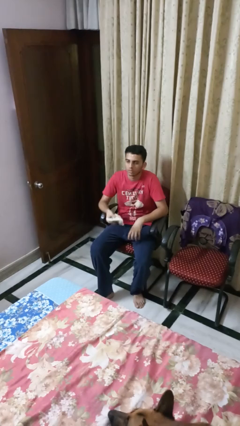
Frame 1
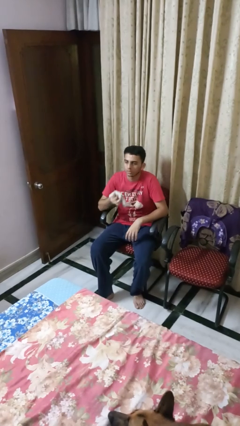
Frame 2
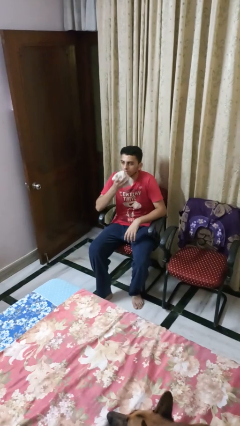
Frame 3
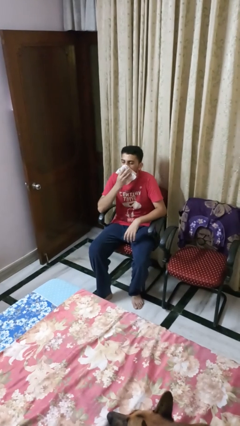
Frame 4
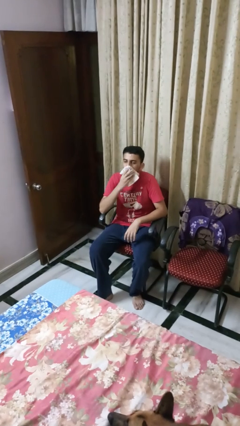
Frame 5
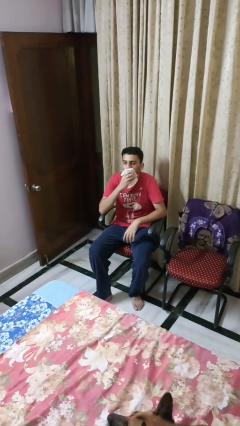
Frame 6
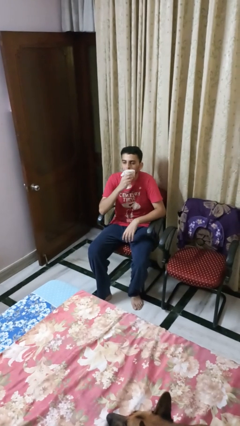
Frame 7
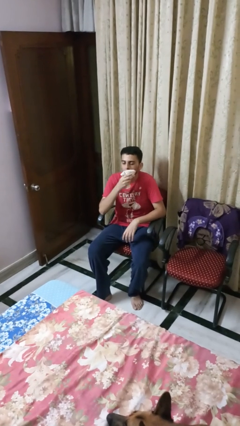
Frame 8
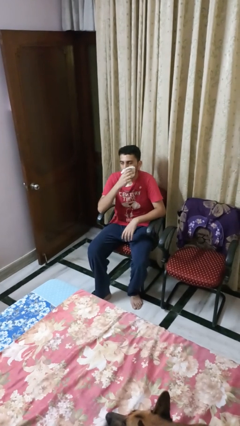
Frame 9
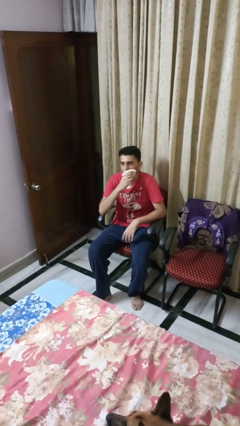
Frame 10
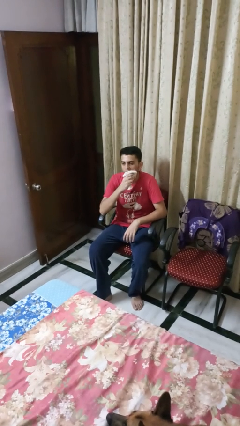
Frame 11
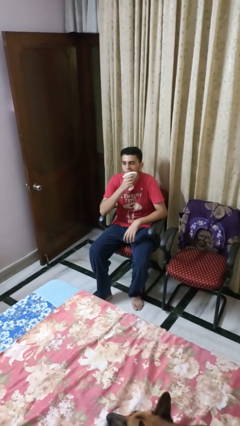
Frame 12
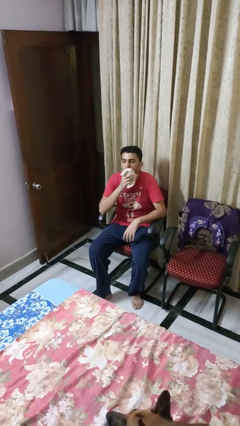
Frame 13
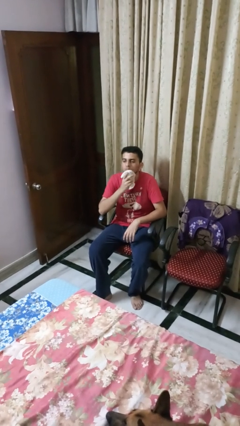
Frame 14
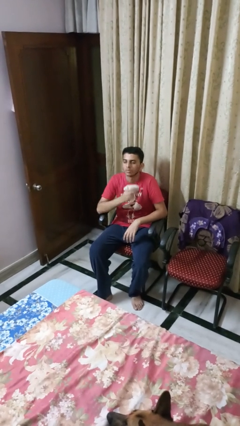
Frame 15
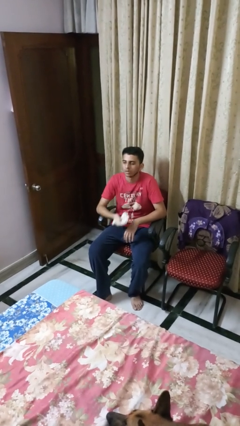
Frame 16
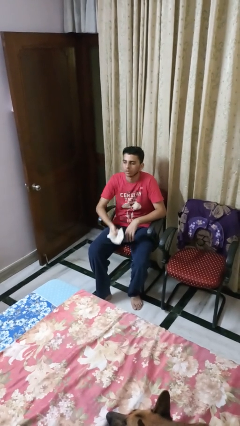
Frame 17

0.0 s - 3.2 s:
person wipes mouth with napkin

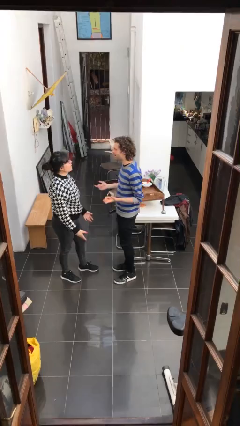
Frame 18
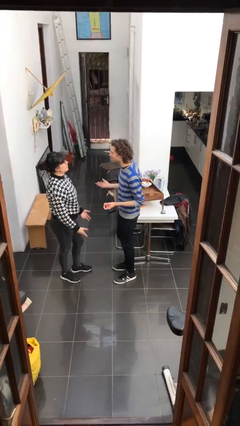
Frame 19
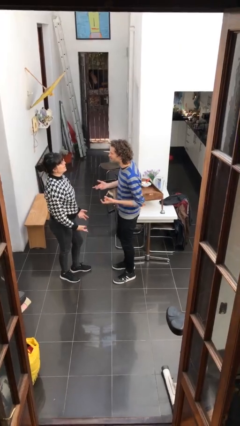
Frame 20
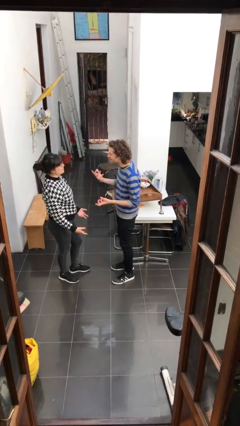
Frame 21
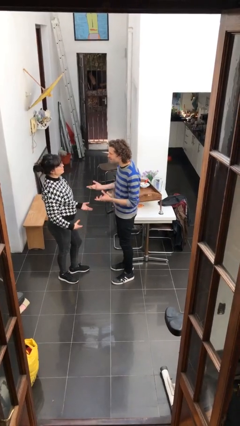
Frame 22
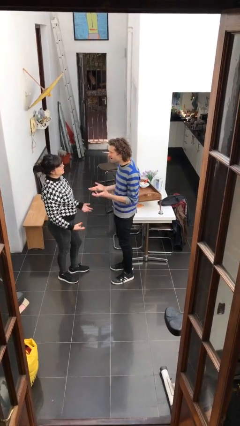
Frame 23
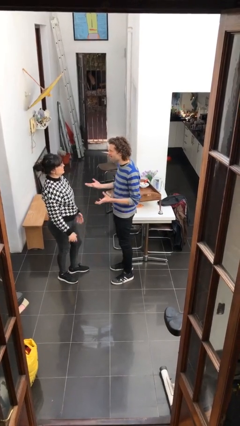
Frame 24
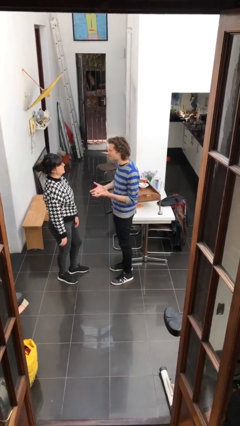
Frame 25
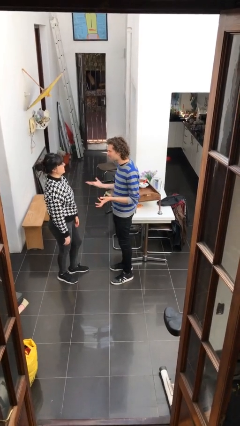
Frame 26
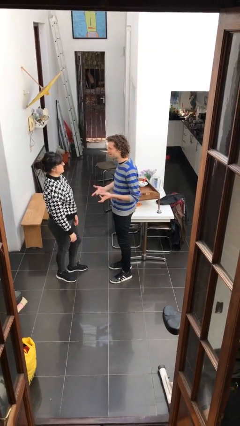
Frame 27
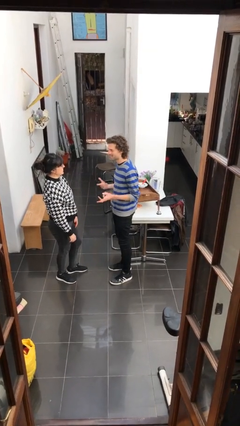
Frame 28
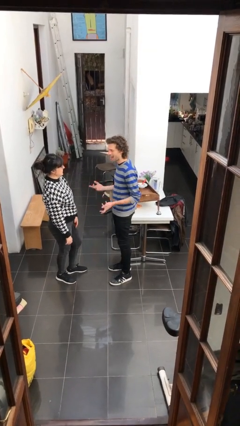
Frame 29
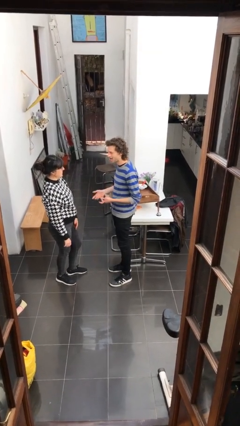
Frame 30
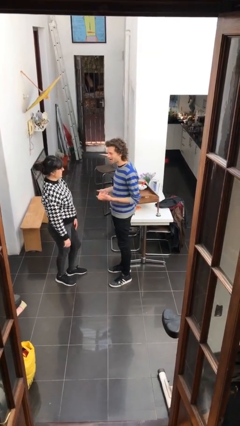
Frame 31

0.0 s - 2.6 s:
person talks to person

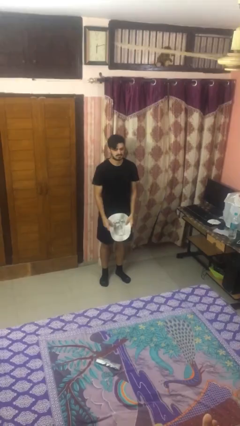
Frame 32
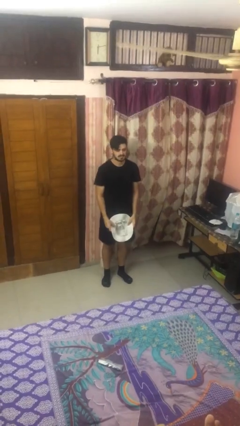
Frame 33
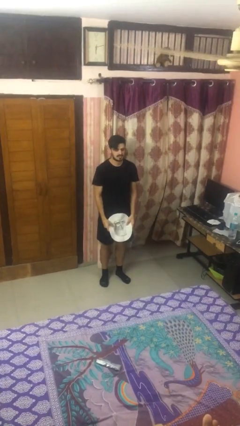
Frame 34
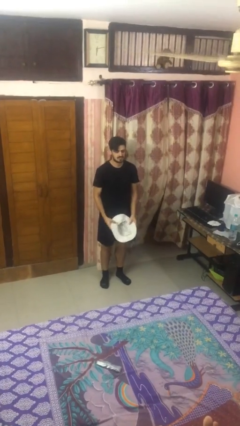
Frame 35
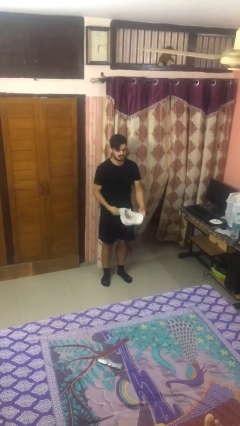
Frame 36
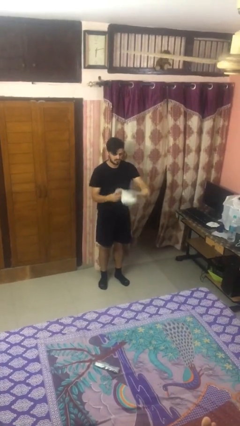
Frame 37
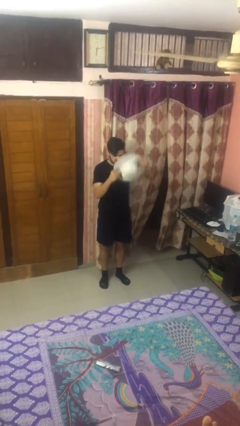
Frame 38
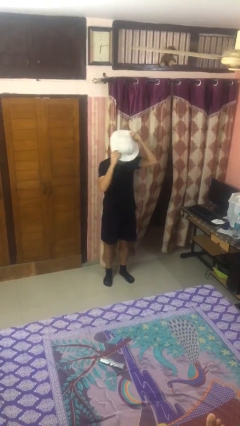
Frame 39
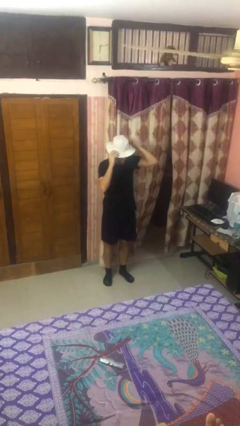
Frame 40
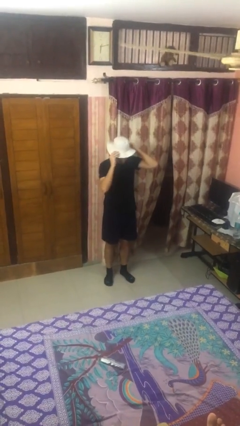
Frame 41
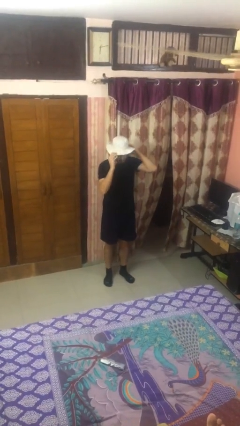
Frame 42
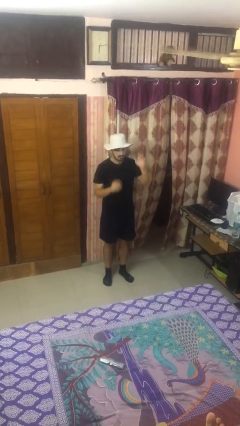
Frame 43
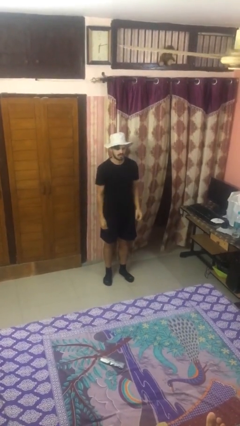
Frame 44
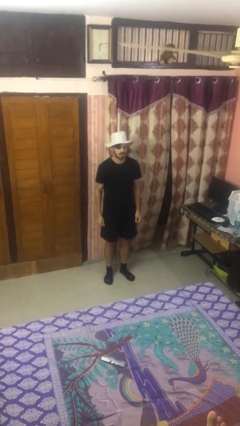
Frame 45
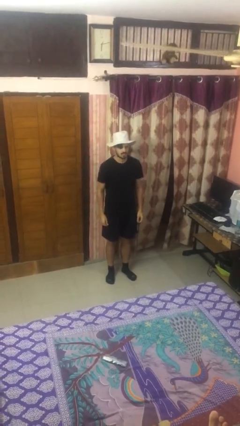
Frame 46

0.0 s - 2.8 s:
person puts on hat

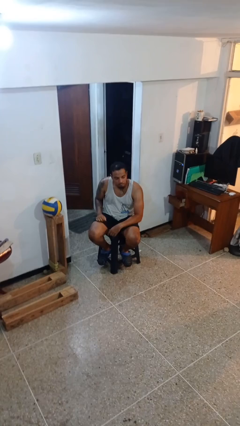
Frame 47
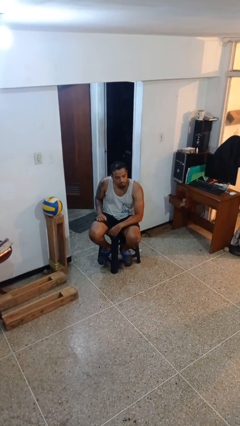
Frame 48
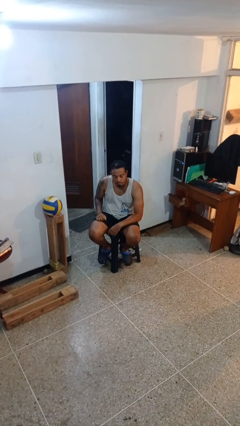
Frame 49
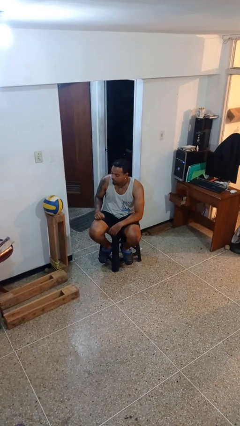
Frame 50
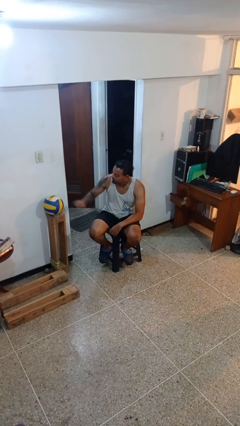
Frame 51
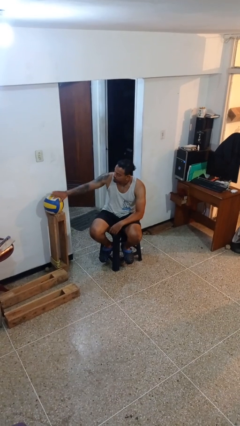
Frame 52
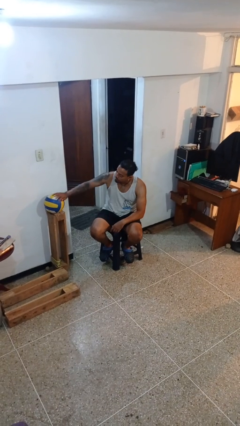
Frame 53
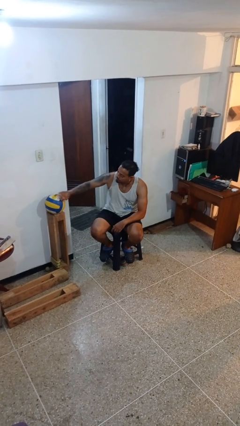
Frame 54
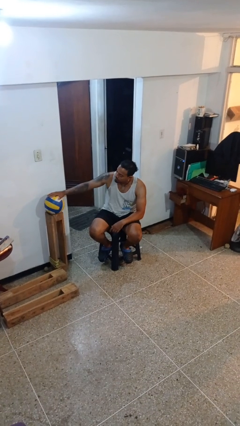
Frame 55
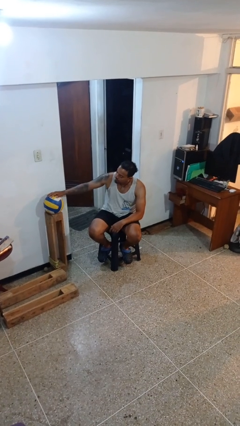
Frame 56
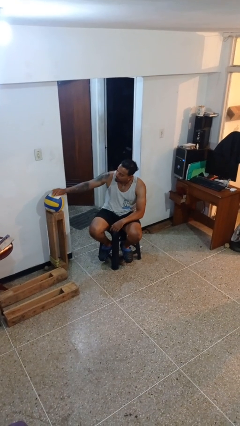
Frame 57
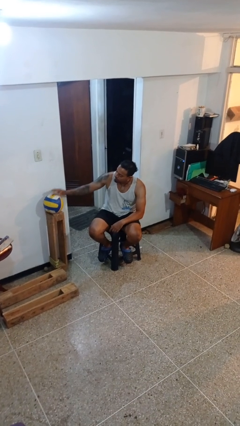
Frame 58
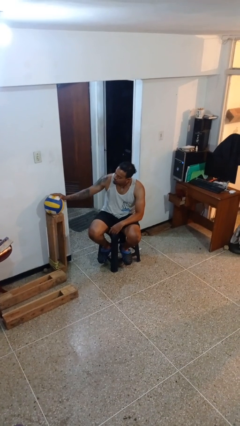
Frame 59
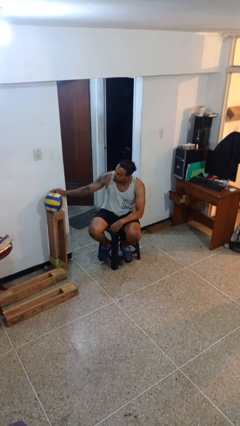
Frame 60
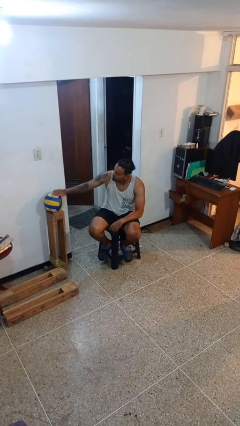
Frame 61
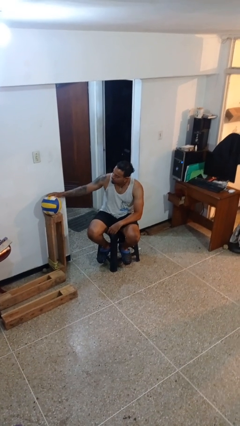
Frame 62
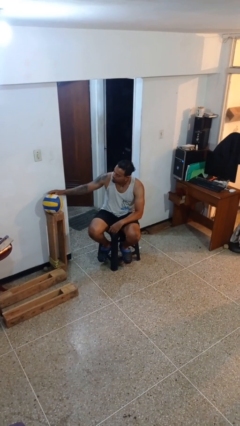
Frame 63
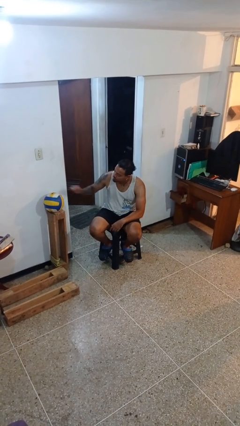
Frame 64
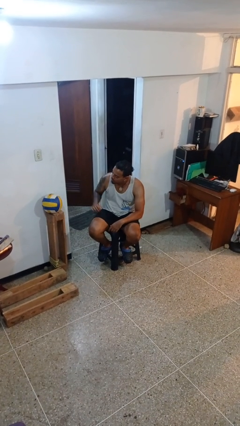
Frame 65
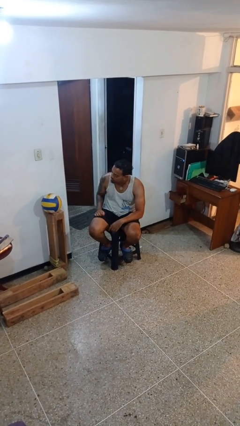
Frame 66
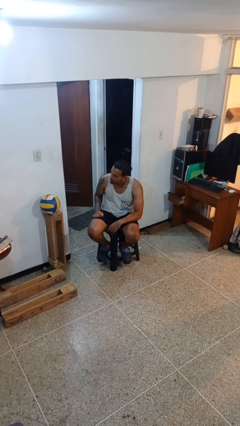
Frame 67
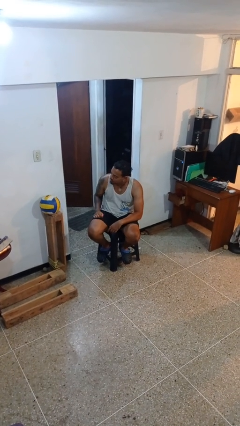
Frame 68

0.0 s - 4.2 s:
person waves hand over object

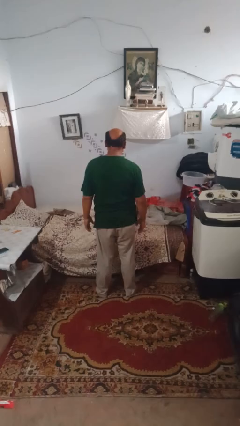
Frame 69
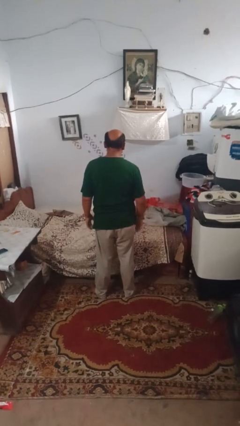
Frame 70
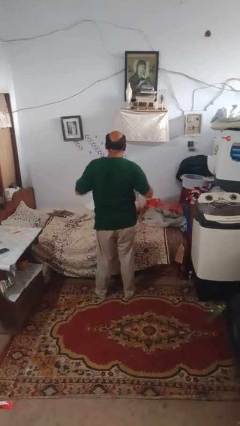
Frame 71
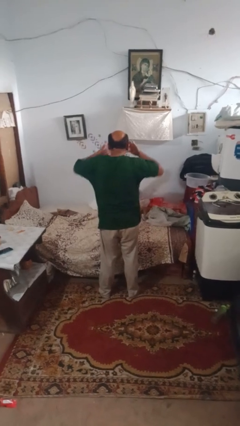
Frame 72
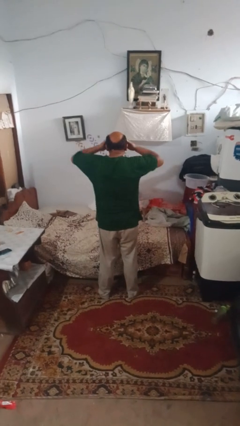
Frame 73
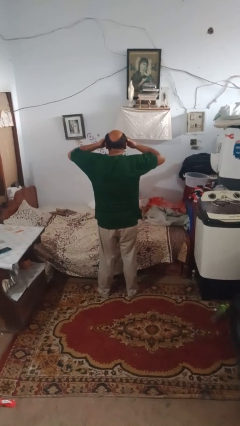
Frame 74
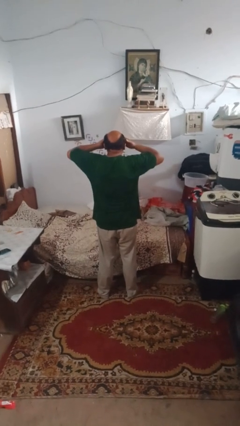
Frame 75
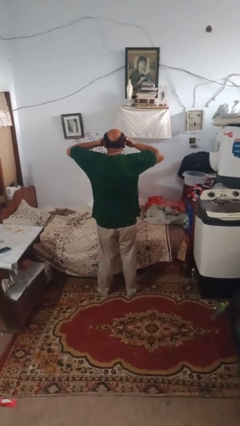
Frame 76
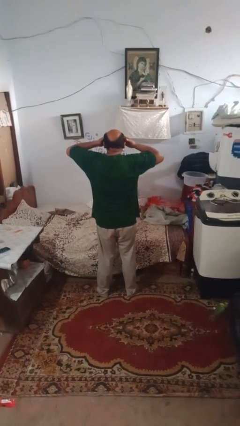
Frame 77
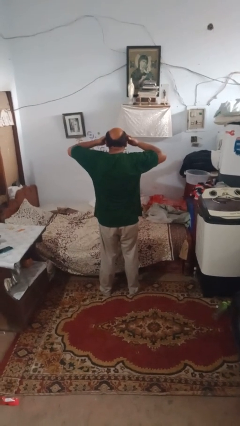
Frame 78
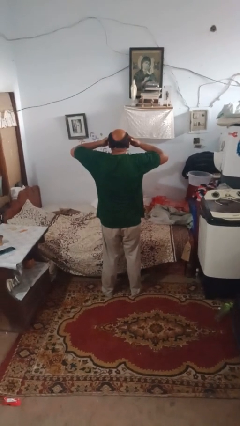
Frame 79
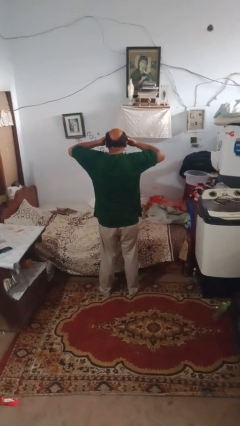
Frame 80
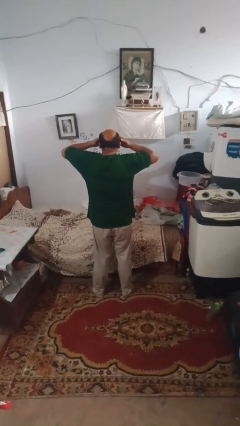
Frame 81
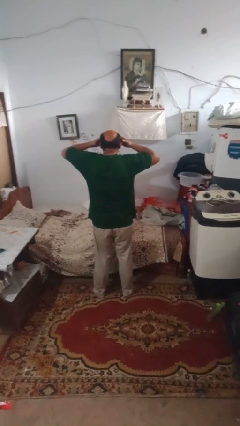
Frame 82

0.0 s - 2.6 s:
person rubs eyes

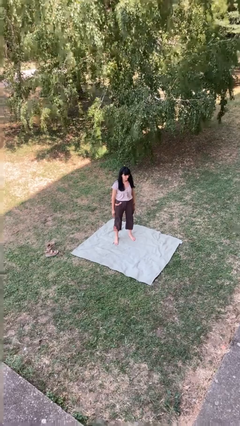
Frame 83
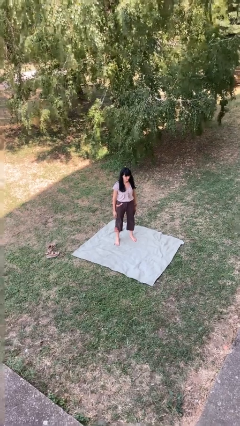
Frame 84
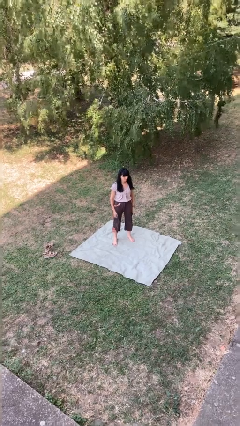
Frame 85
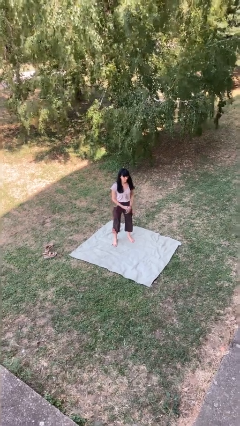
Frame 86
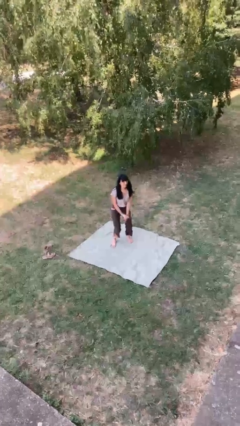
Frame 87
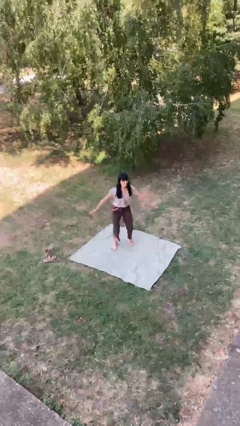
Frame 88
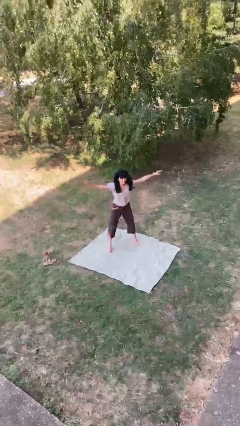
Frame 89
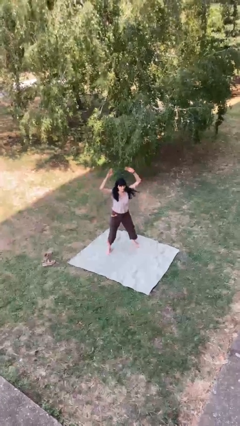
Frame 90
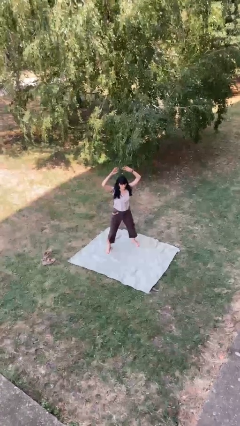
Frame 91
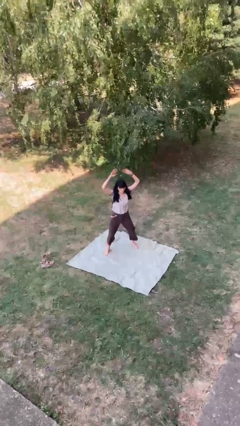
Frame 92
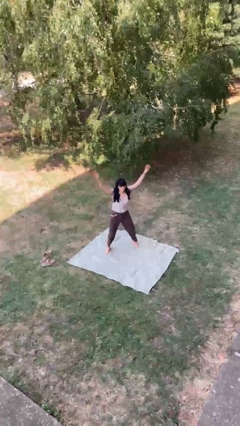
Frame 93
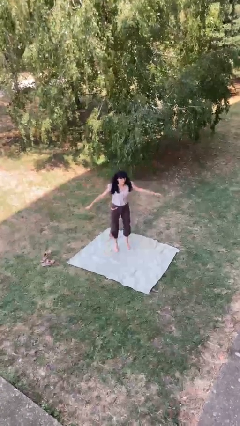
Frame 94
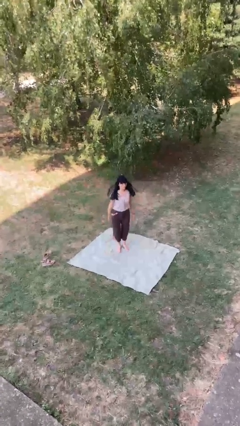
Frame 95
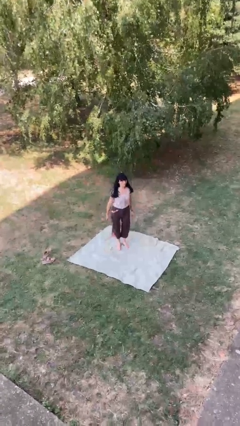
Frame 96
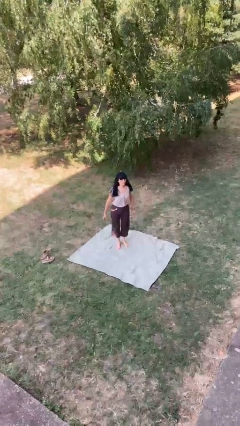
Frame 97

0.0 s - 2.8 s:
person exercises with jumping jacks
